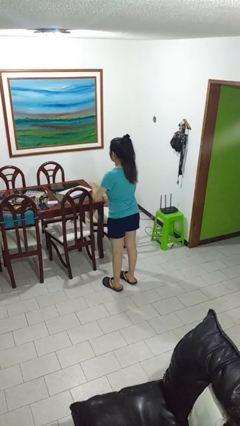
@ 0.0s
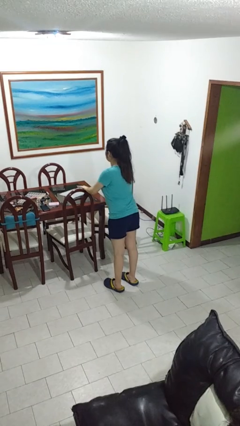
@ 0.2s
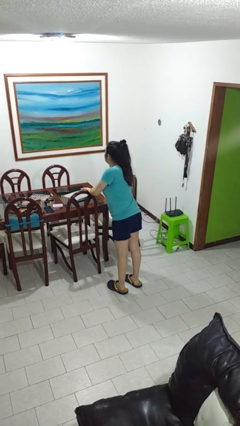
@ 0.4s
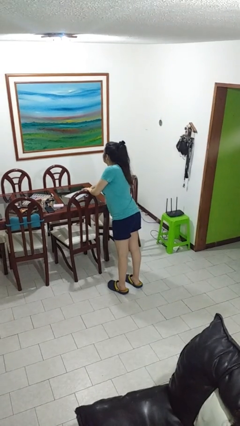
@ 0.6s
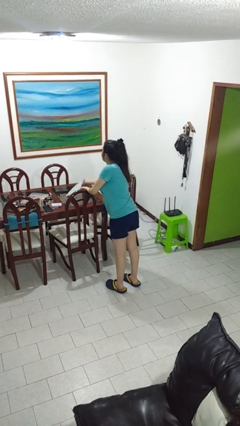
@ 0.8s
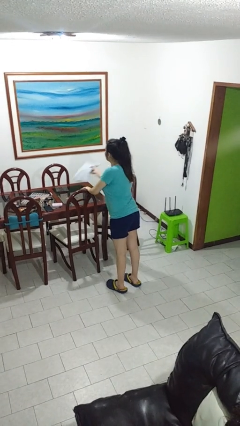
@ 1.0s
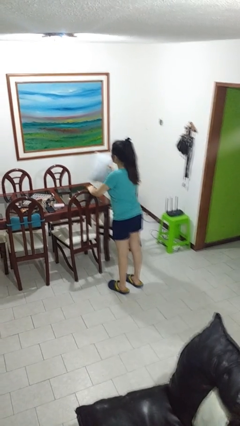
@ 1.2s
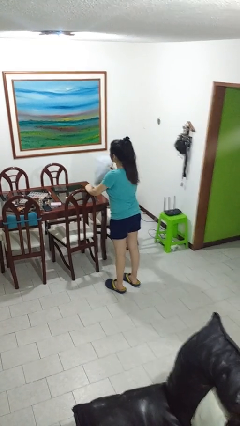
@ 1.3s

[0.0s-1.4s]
person picks up object from table

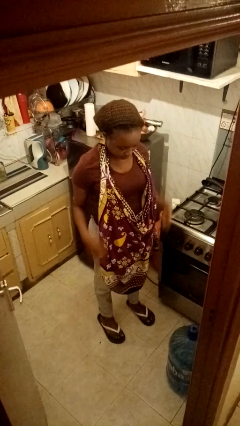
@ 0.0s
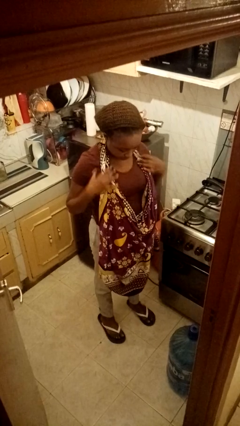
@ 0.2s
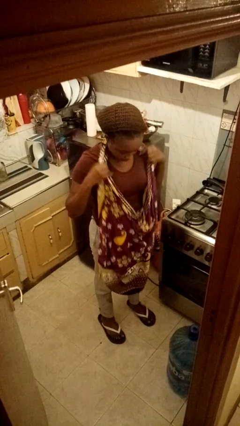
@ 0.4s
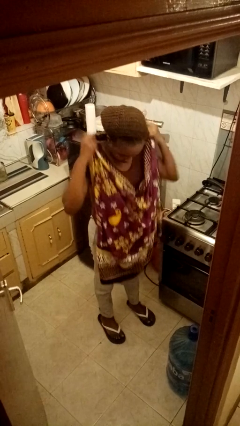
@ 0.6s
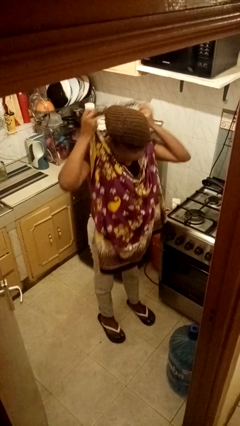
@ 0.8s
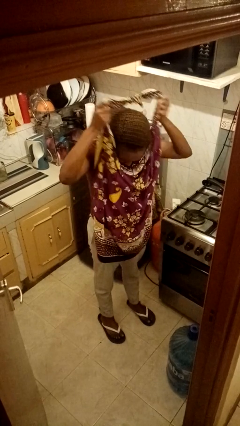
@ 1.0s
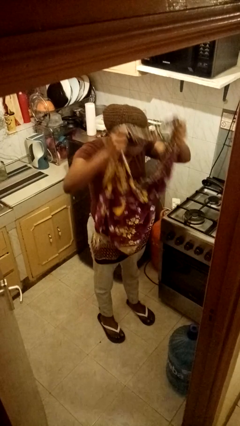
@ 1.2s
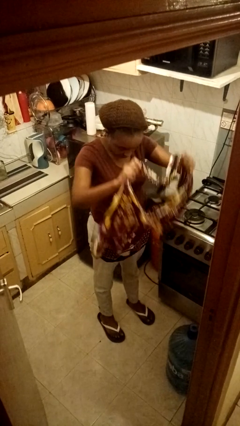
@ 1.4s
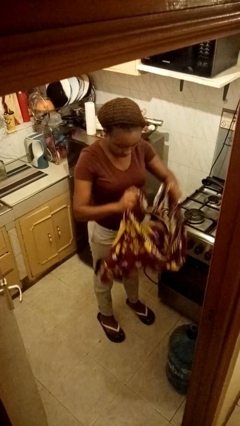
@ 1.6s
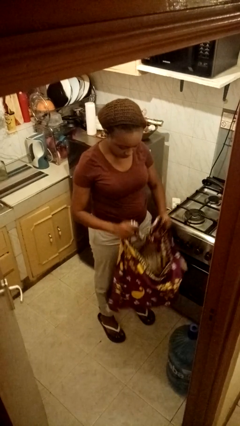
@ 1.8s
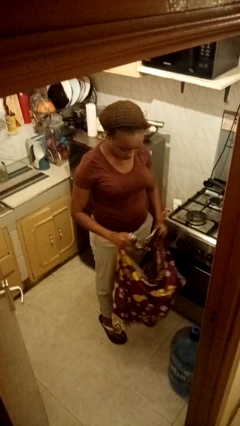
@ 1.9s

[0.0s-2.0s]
person takes off apron

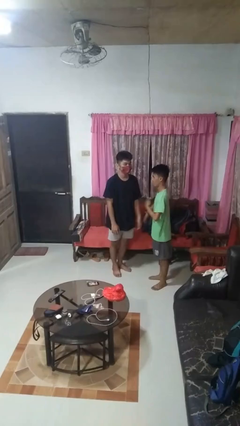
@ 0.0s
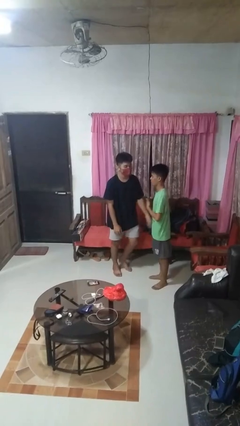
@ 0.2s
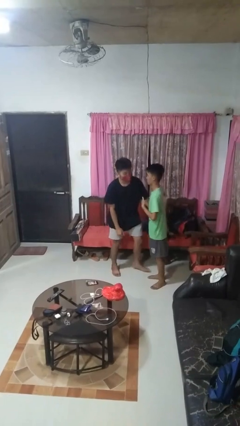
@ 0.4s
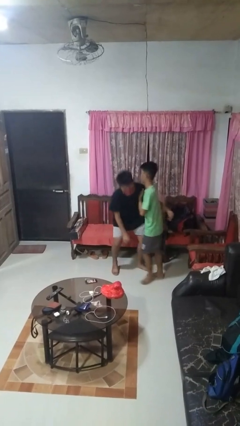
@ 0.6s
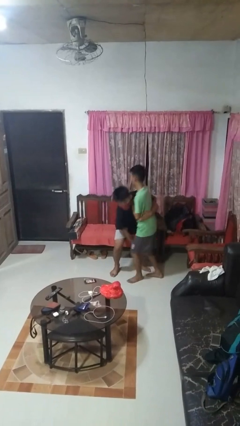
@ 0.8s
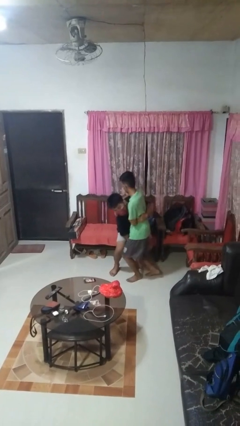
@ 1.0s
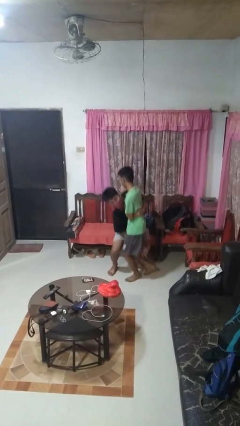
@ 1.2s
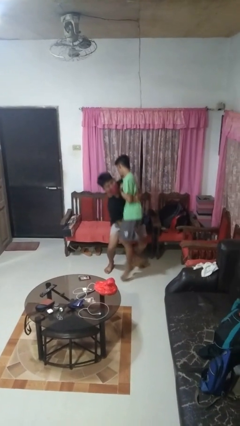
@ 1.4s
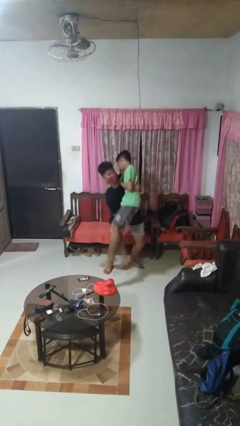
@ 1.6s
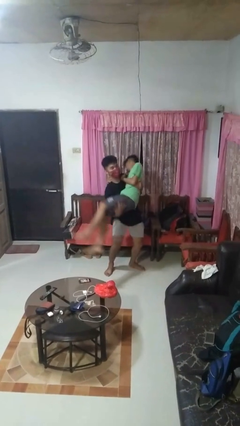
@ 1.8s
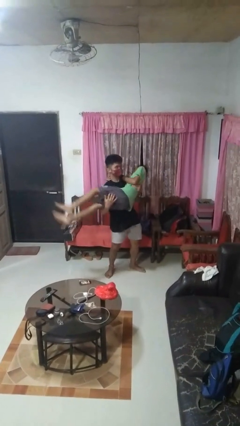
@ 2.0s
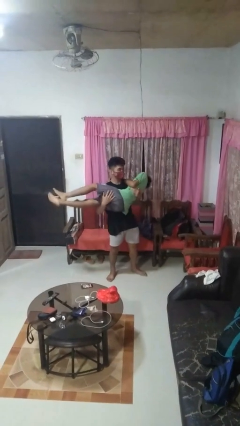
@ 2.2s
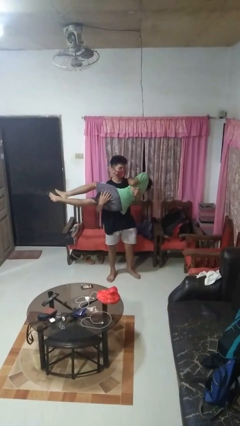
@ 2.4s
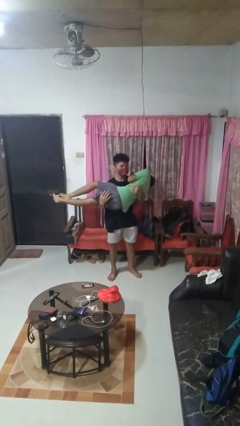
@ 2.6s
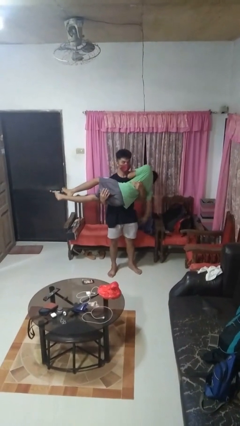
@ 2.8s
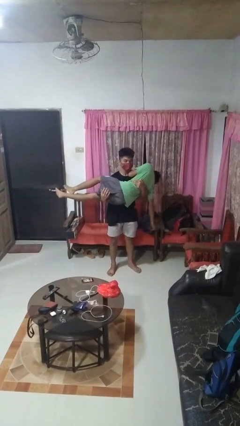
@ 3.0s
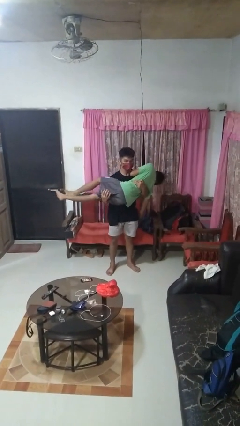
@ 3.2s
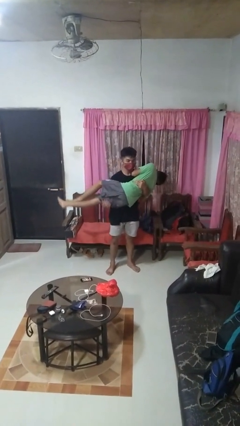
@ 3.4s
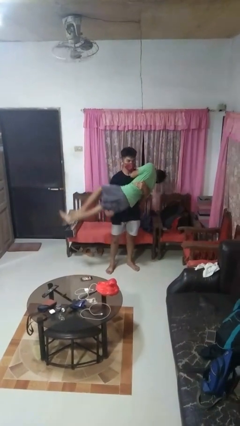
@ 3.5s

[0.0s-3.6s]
person picks up person

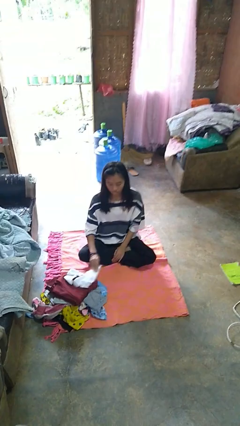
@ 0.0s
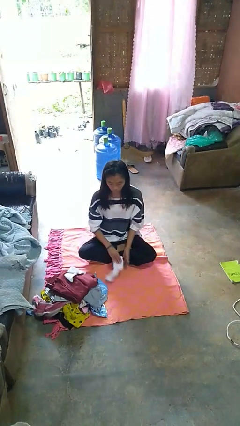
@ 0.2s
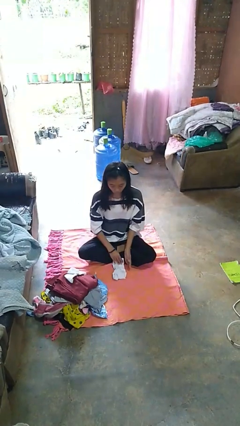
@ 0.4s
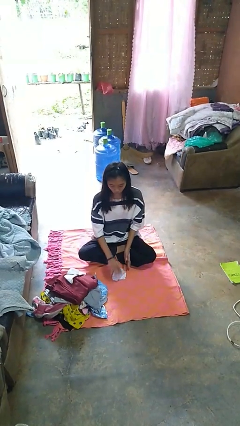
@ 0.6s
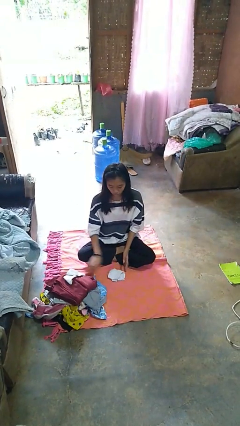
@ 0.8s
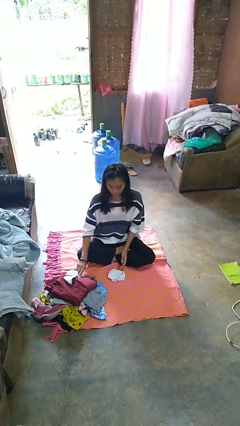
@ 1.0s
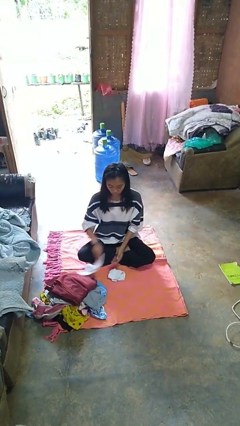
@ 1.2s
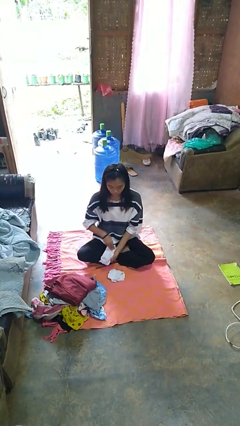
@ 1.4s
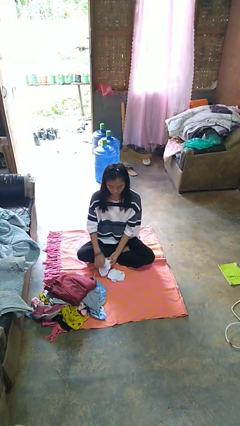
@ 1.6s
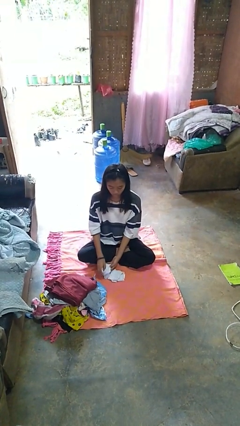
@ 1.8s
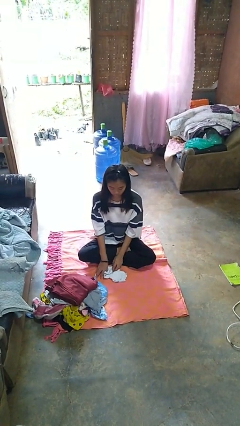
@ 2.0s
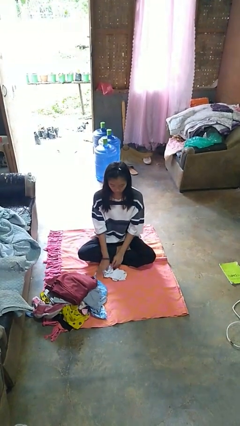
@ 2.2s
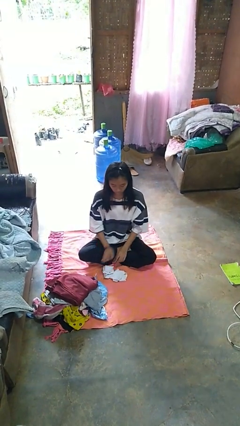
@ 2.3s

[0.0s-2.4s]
person folds socks

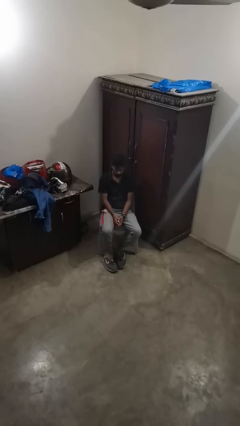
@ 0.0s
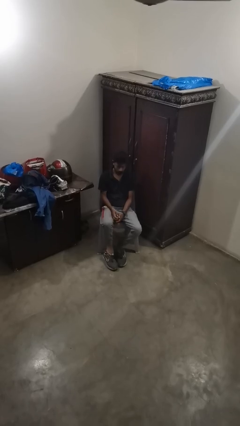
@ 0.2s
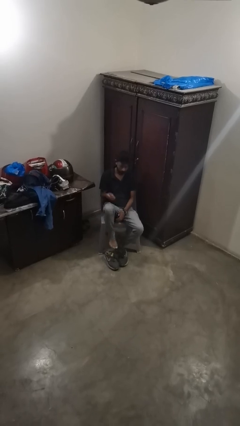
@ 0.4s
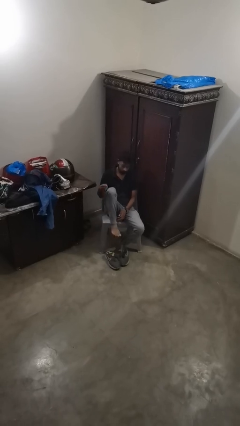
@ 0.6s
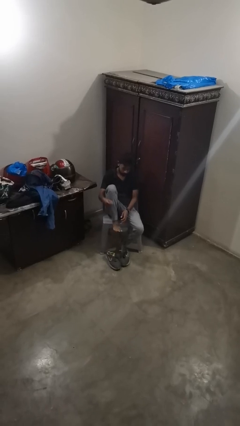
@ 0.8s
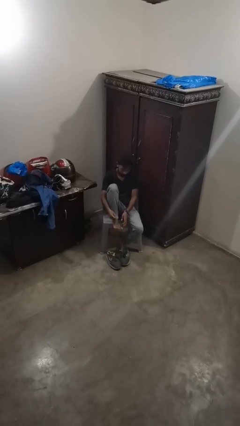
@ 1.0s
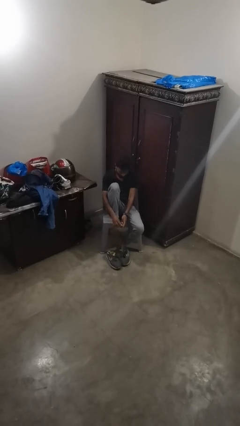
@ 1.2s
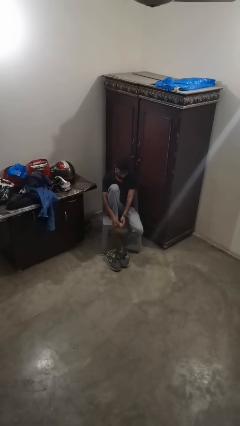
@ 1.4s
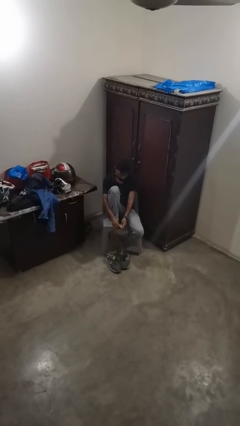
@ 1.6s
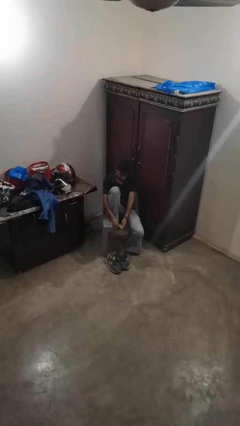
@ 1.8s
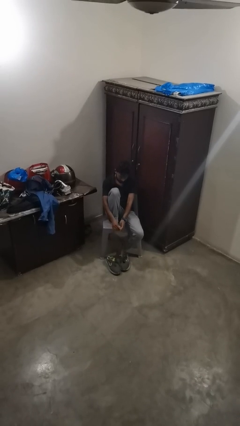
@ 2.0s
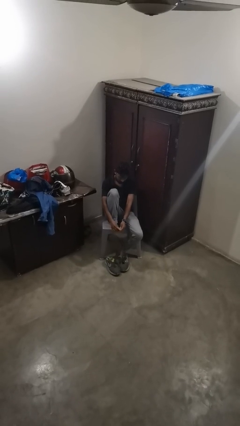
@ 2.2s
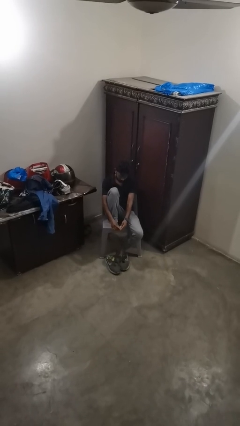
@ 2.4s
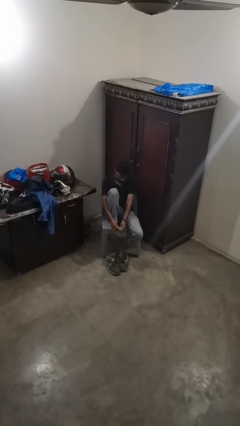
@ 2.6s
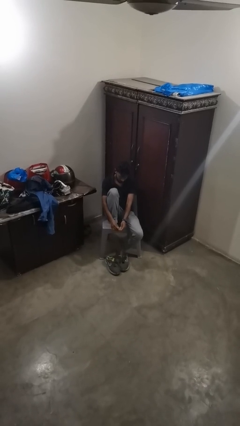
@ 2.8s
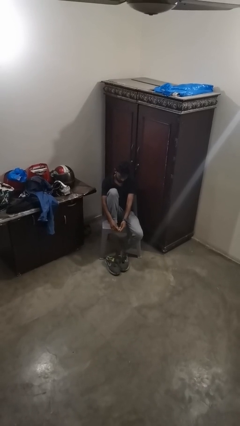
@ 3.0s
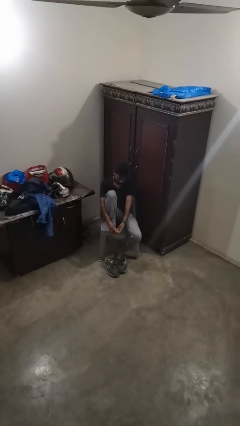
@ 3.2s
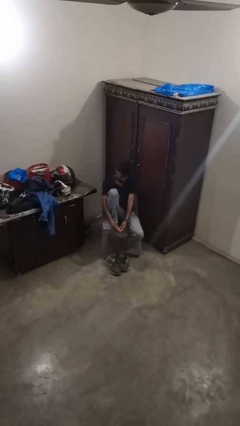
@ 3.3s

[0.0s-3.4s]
person rubs foot

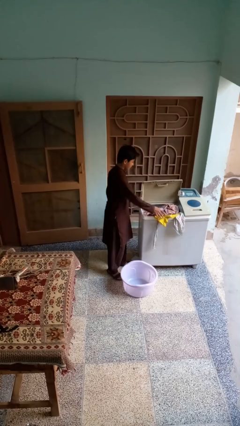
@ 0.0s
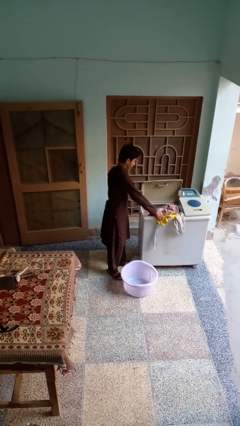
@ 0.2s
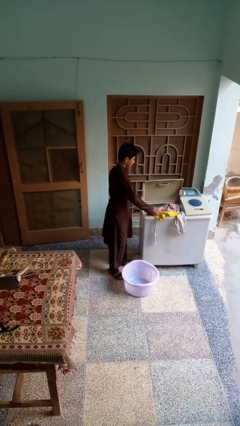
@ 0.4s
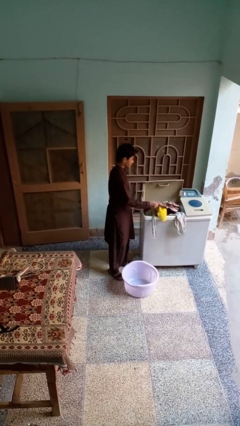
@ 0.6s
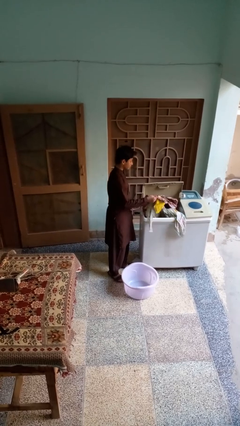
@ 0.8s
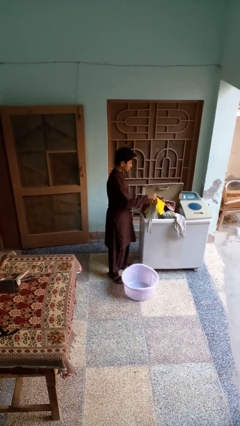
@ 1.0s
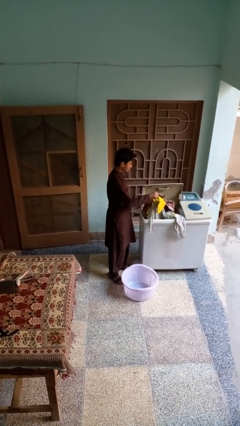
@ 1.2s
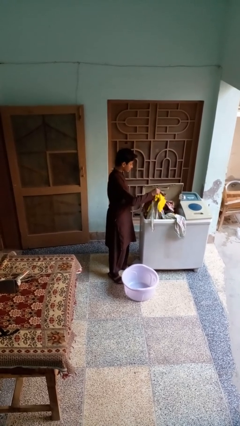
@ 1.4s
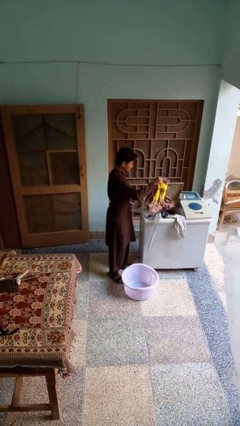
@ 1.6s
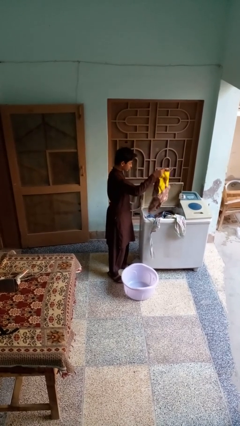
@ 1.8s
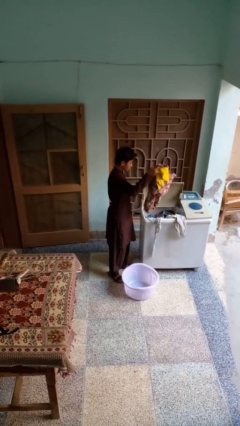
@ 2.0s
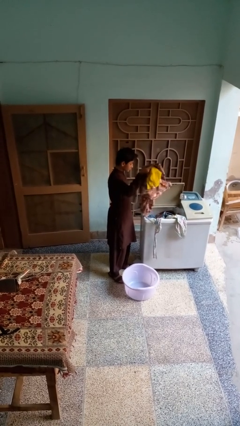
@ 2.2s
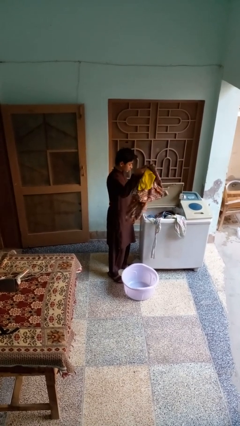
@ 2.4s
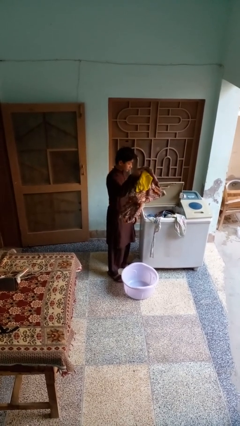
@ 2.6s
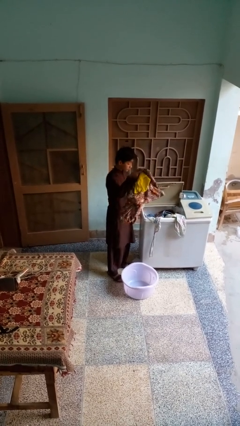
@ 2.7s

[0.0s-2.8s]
person loads clotheswasher

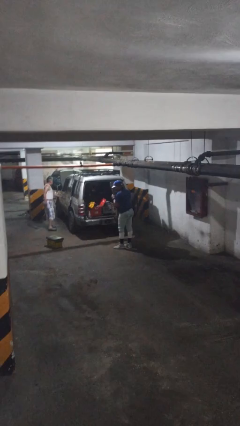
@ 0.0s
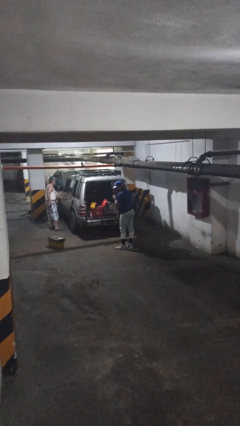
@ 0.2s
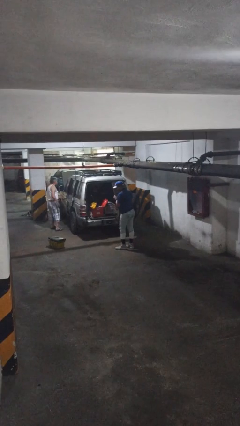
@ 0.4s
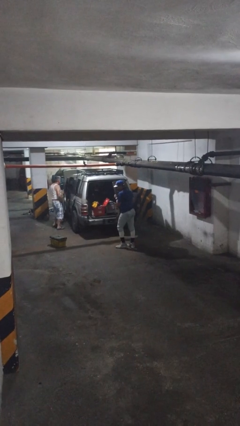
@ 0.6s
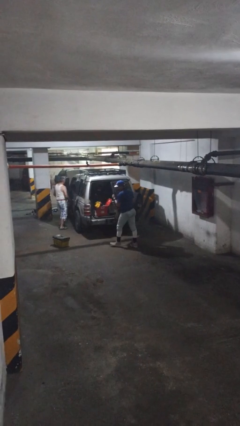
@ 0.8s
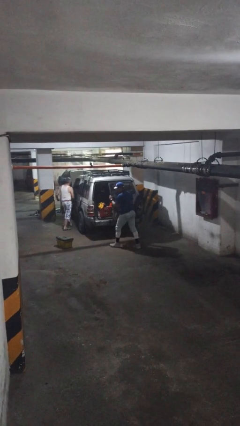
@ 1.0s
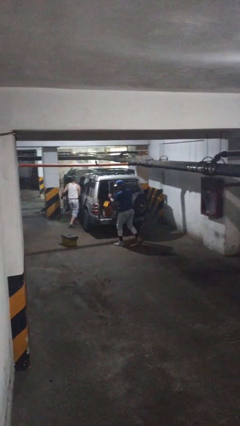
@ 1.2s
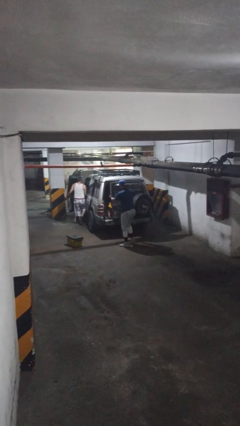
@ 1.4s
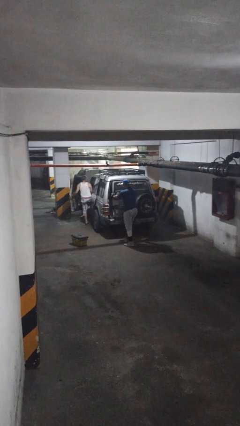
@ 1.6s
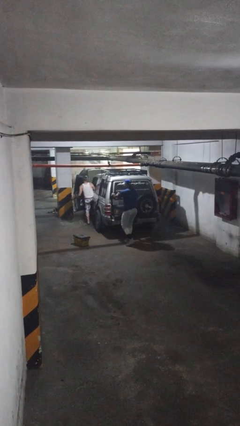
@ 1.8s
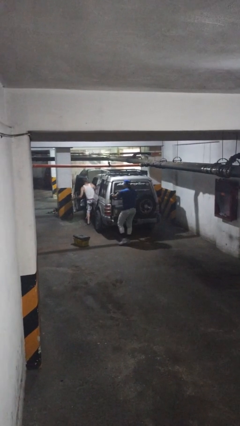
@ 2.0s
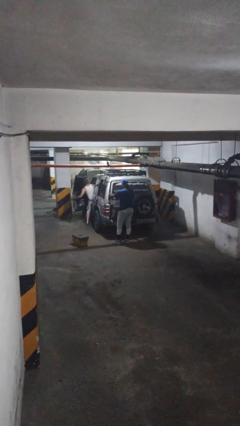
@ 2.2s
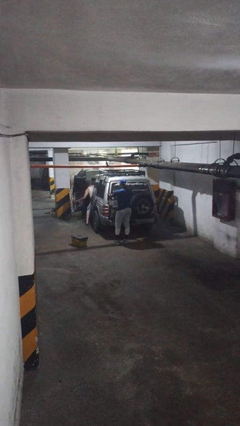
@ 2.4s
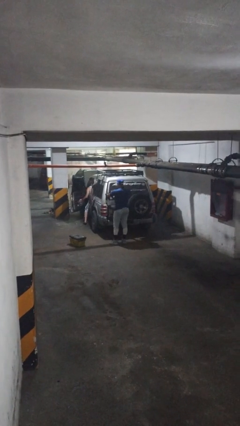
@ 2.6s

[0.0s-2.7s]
person closes car trunk
